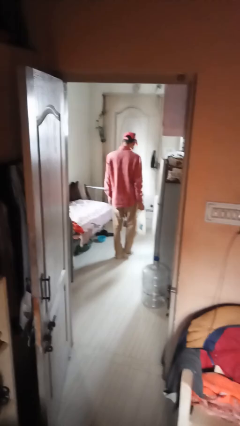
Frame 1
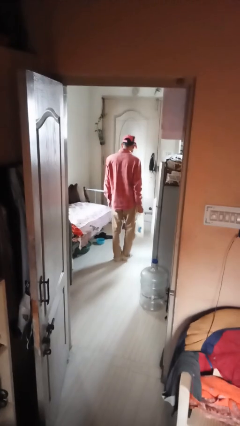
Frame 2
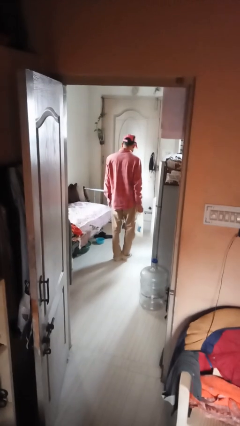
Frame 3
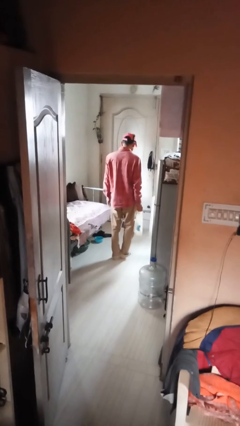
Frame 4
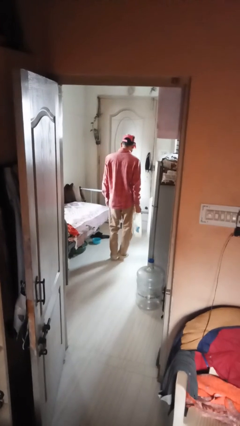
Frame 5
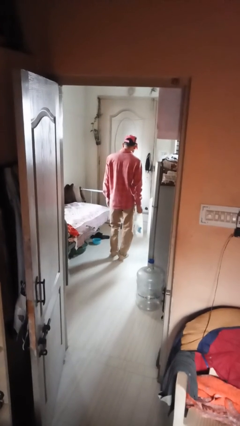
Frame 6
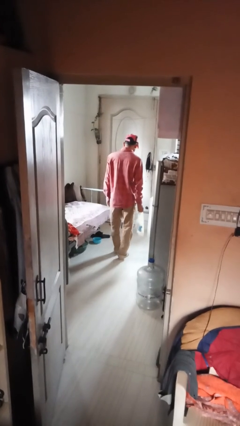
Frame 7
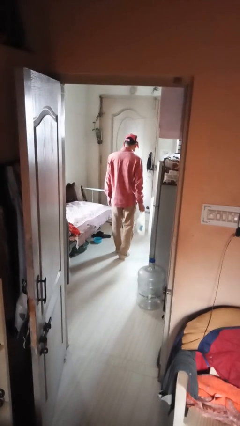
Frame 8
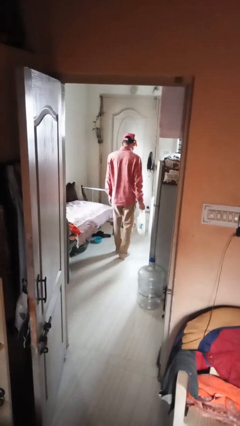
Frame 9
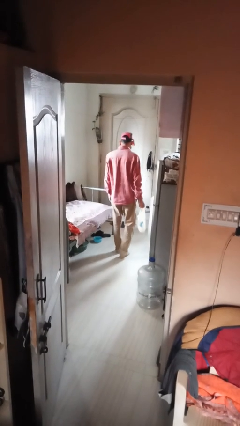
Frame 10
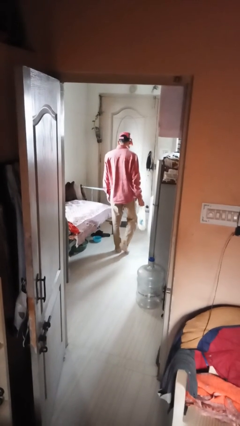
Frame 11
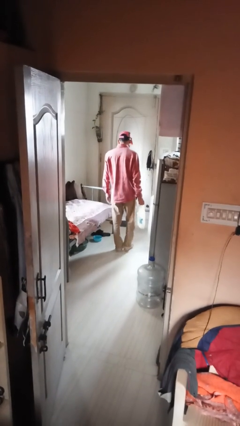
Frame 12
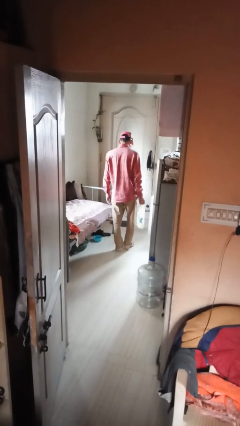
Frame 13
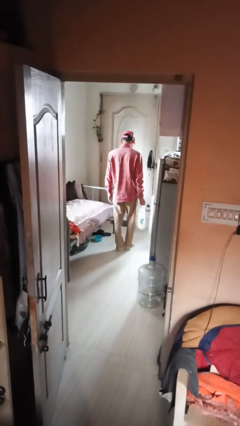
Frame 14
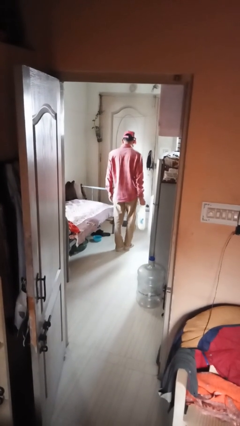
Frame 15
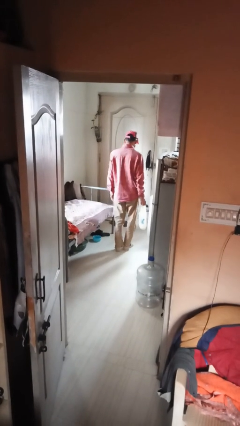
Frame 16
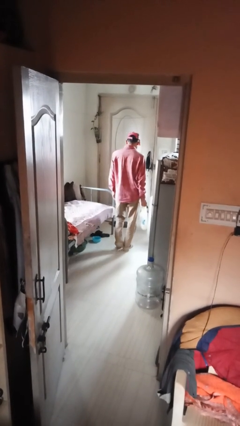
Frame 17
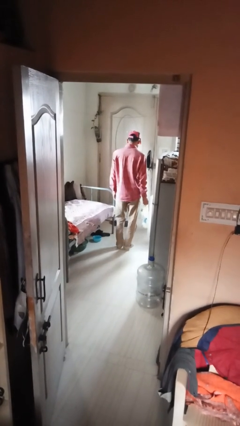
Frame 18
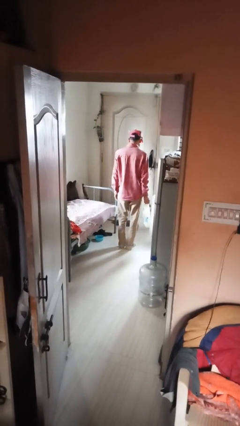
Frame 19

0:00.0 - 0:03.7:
person carries groceries

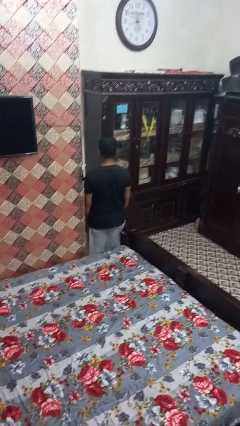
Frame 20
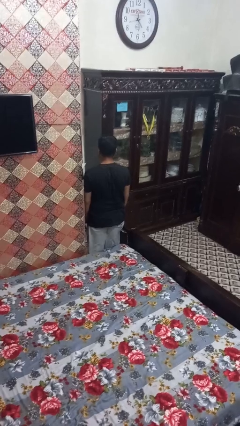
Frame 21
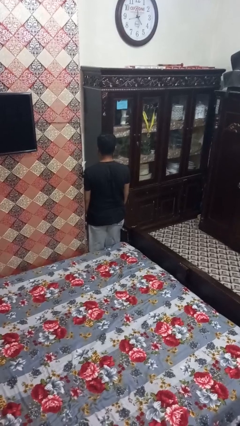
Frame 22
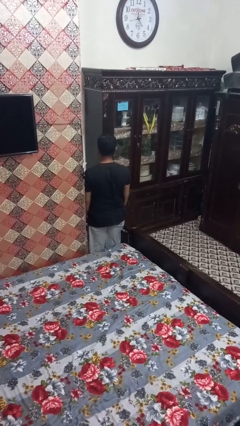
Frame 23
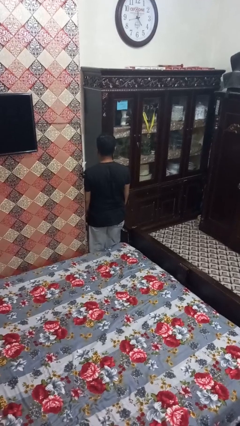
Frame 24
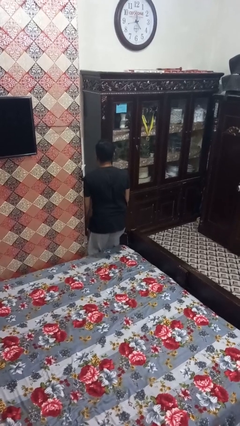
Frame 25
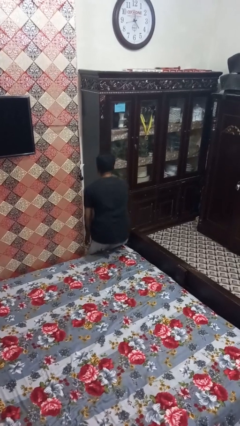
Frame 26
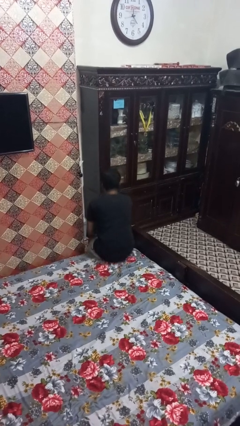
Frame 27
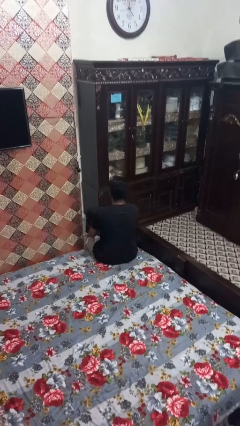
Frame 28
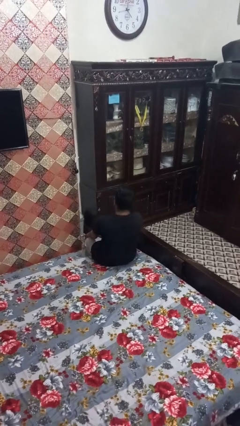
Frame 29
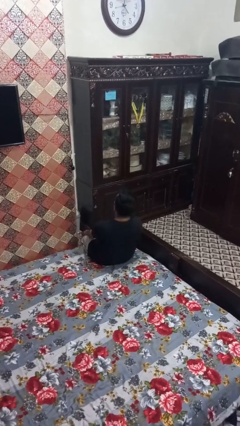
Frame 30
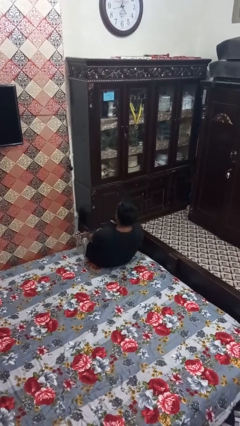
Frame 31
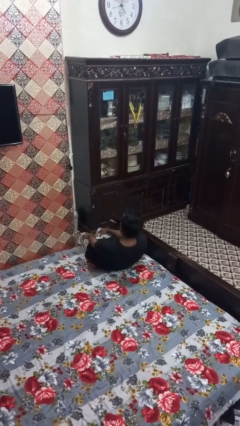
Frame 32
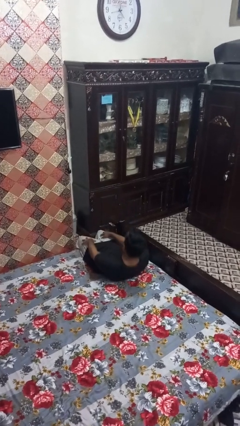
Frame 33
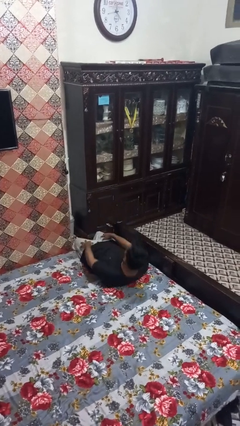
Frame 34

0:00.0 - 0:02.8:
person lies down on bed

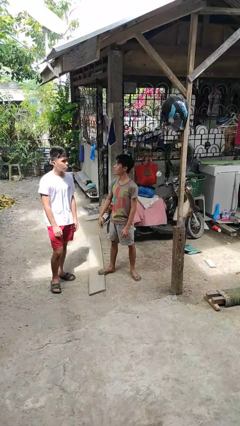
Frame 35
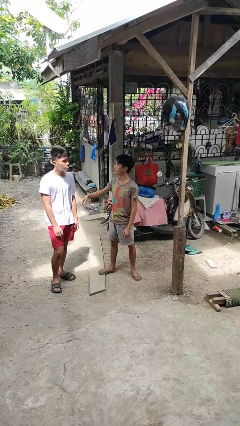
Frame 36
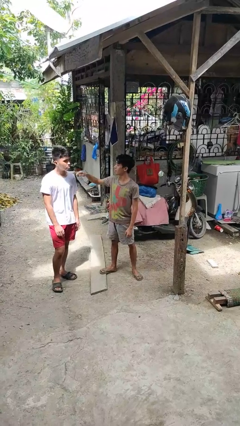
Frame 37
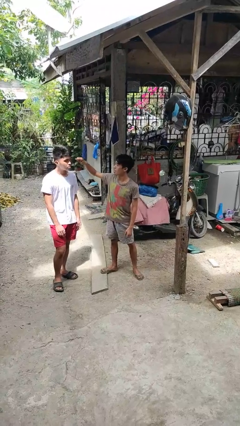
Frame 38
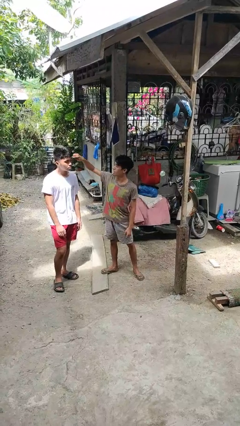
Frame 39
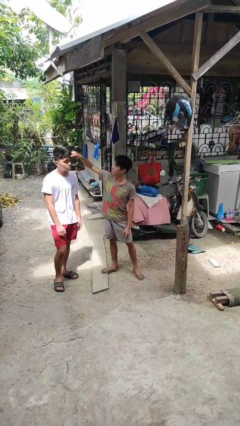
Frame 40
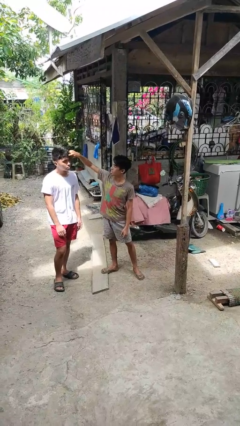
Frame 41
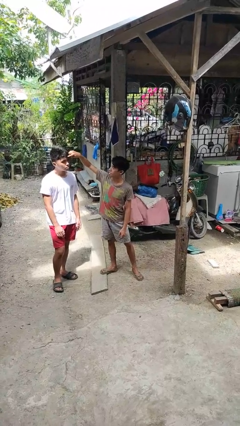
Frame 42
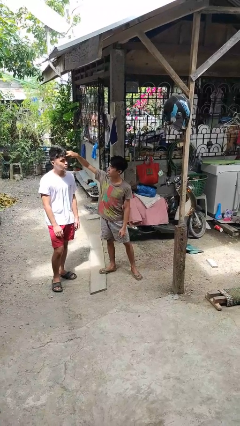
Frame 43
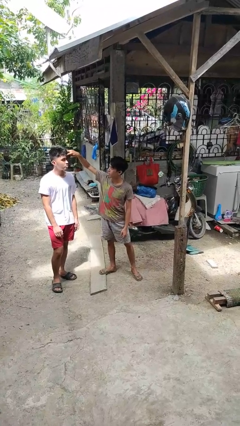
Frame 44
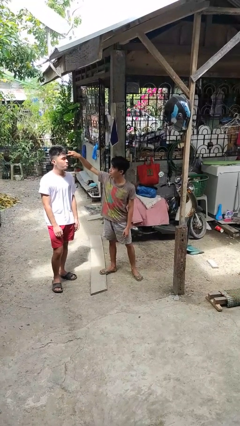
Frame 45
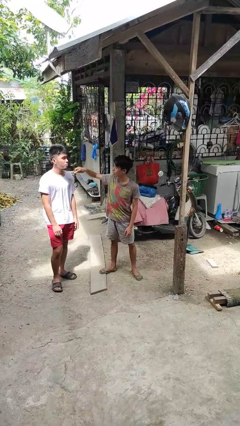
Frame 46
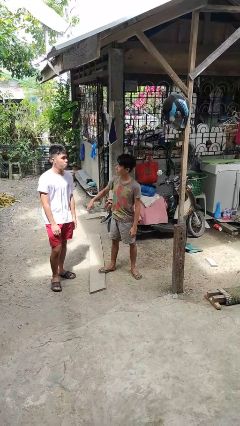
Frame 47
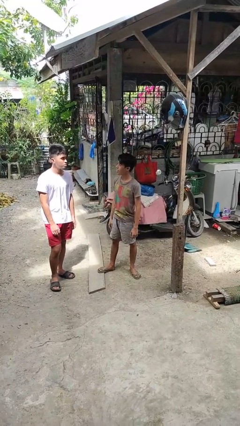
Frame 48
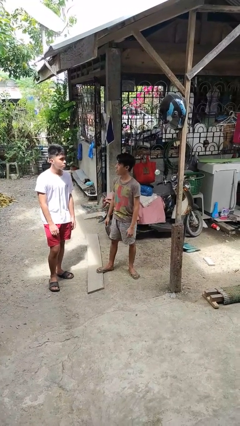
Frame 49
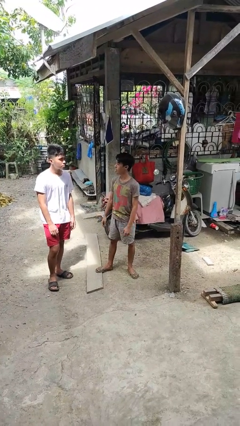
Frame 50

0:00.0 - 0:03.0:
person touches face of person

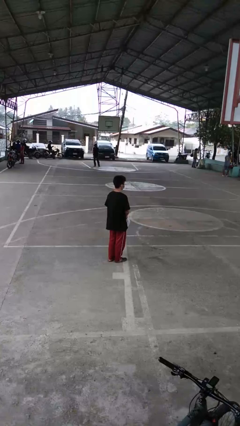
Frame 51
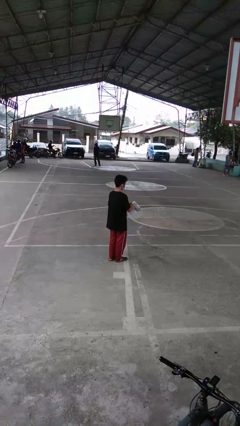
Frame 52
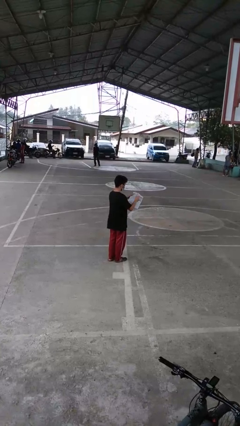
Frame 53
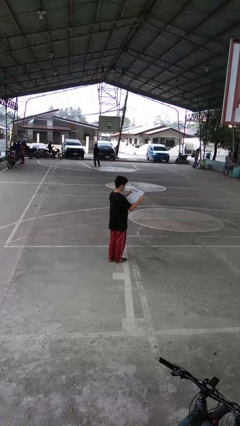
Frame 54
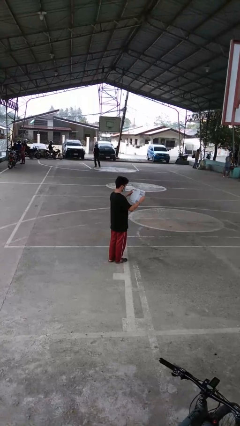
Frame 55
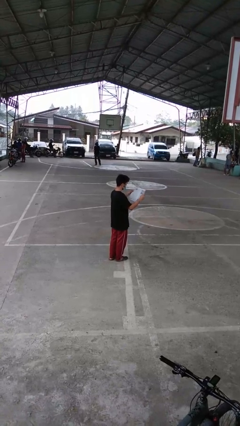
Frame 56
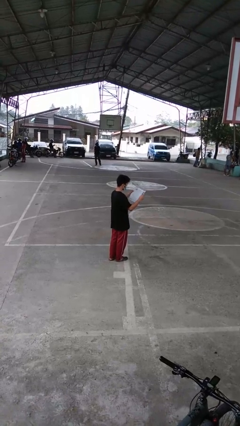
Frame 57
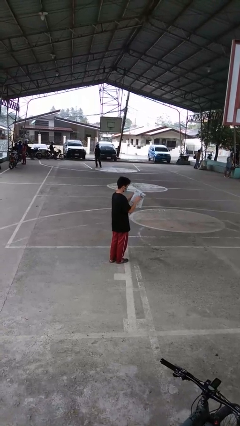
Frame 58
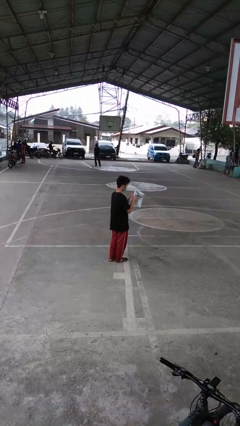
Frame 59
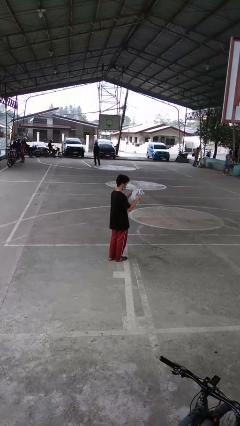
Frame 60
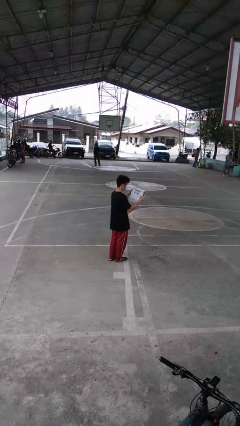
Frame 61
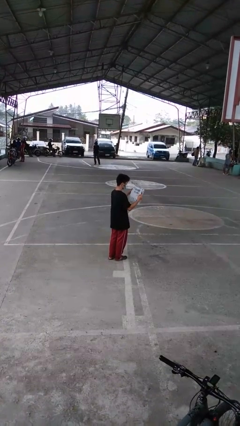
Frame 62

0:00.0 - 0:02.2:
person reads newspaper

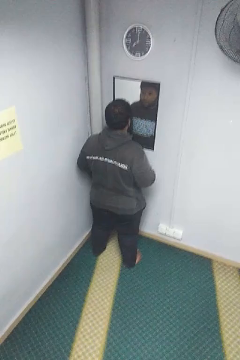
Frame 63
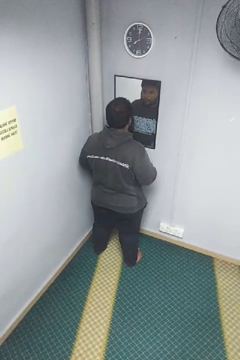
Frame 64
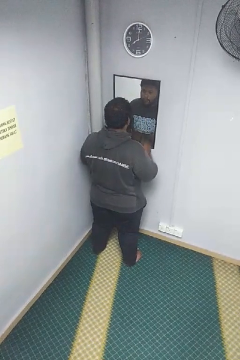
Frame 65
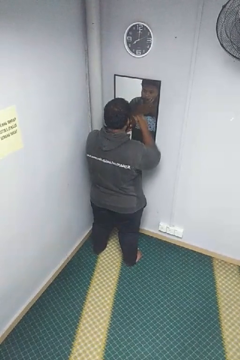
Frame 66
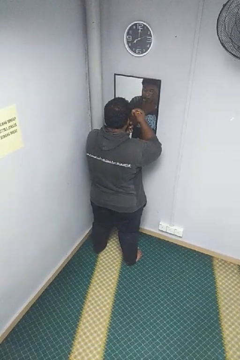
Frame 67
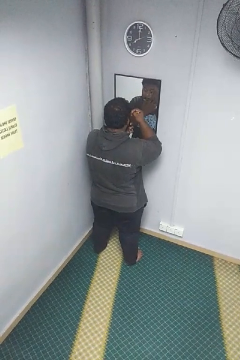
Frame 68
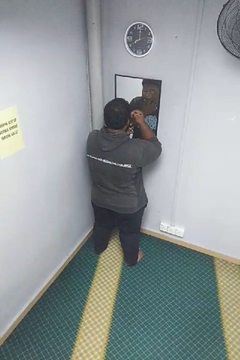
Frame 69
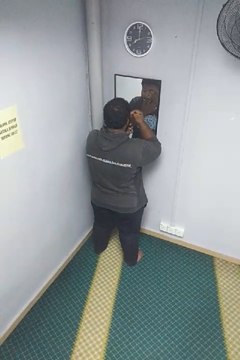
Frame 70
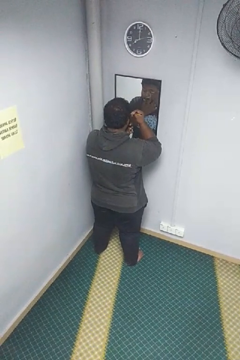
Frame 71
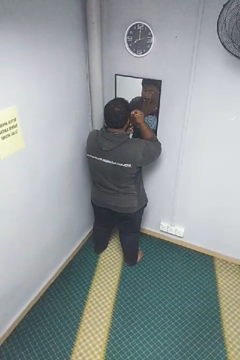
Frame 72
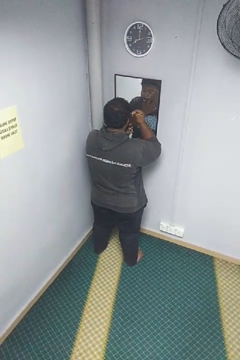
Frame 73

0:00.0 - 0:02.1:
person applies eye makeup

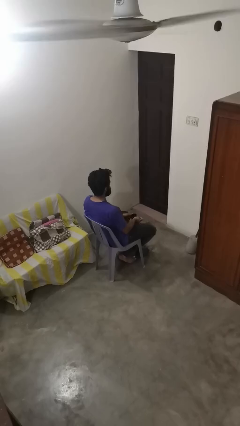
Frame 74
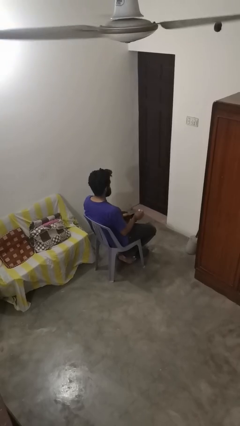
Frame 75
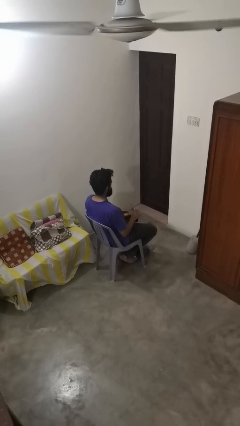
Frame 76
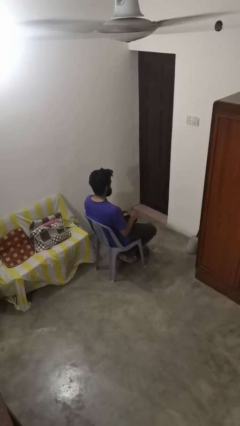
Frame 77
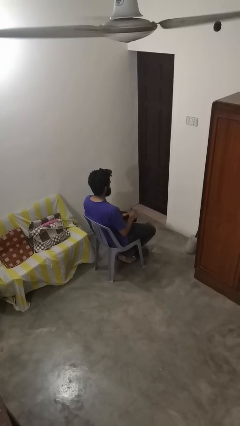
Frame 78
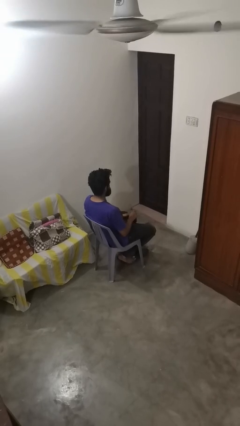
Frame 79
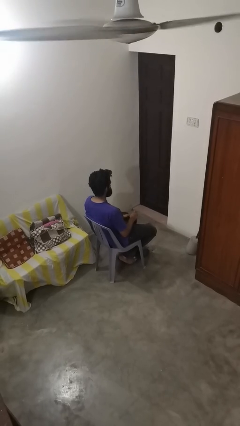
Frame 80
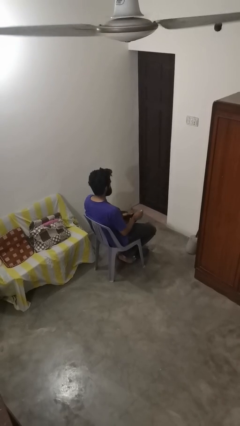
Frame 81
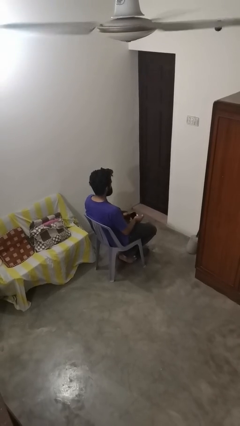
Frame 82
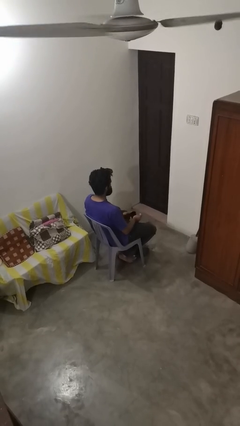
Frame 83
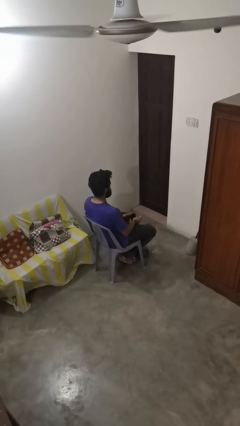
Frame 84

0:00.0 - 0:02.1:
person stirs mug

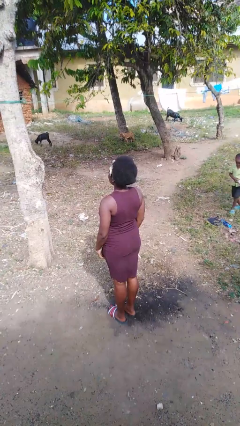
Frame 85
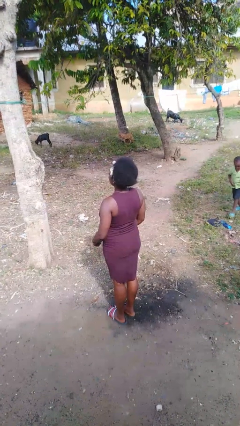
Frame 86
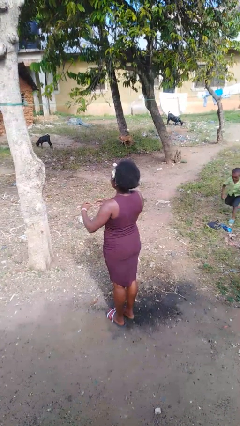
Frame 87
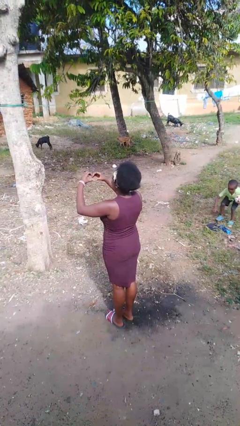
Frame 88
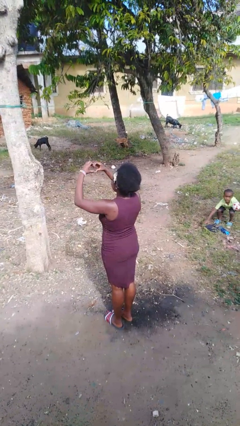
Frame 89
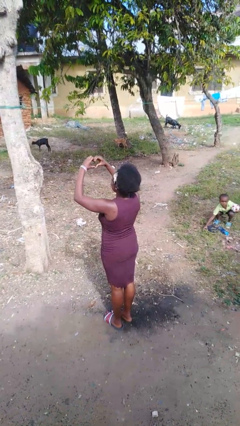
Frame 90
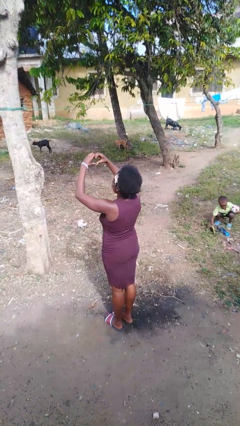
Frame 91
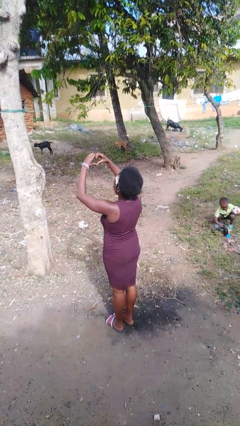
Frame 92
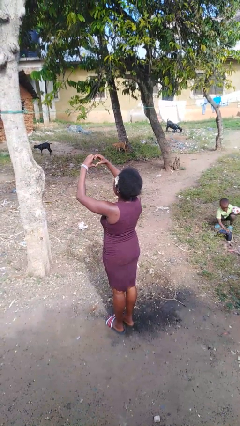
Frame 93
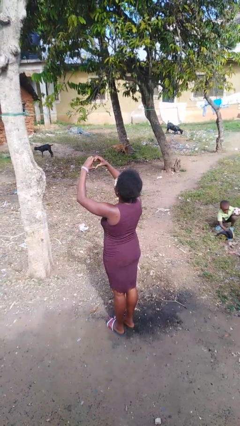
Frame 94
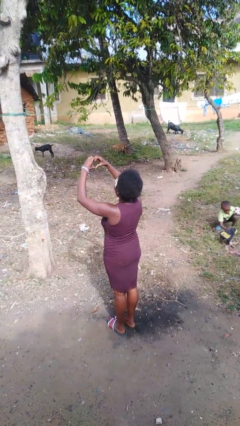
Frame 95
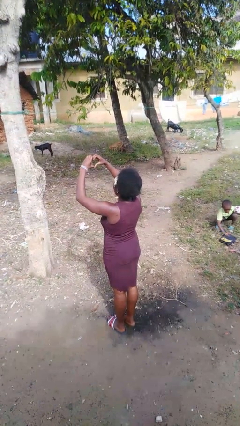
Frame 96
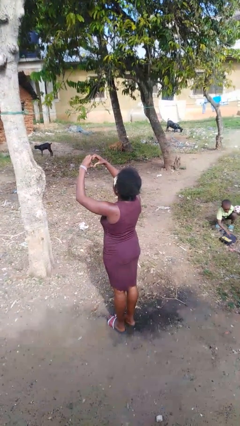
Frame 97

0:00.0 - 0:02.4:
person gestures heart
